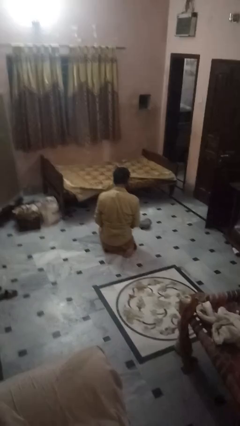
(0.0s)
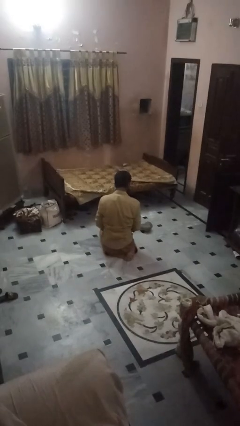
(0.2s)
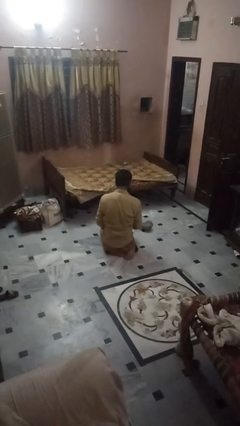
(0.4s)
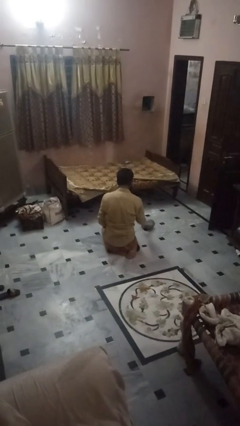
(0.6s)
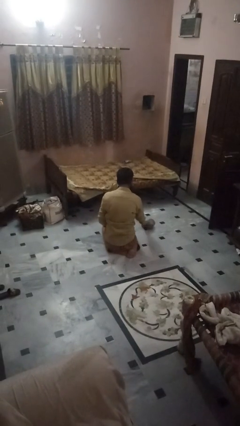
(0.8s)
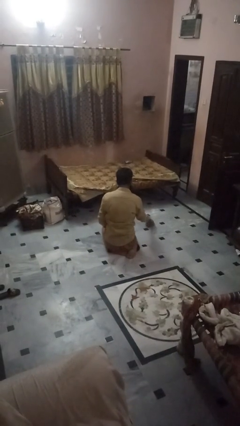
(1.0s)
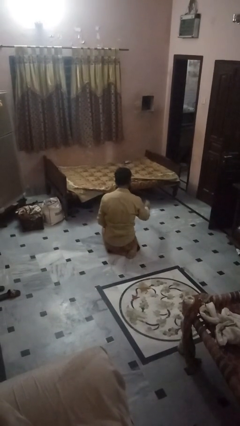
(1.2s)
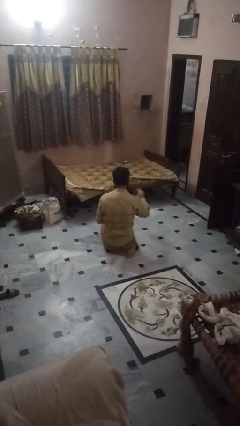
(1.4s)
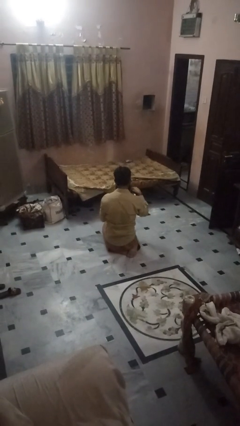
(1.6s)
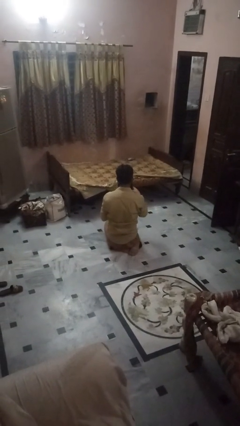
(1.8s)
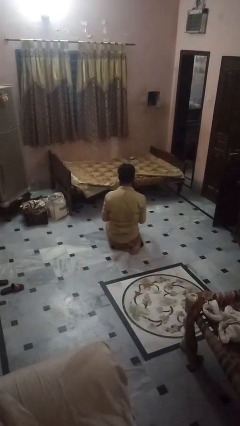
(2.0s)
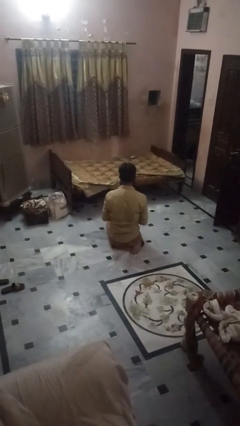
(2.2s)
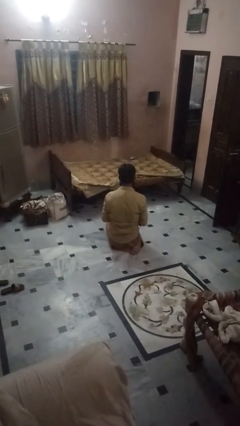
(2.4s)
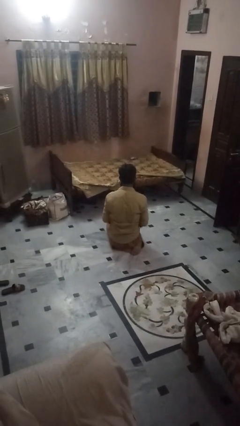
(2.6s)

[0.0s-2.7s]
person picks up object from floor

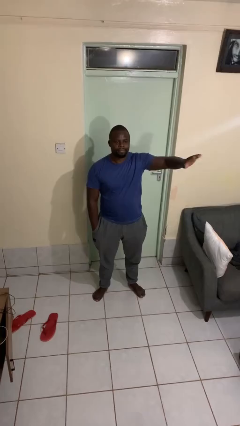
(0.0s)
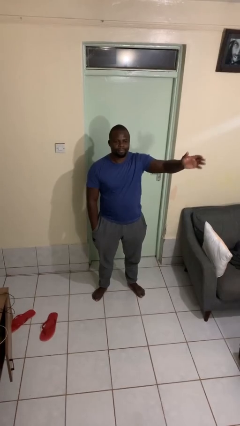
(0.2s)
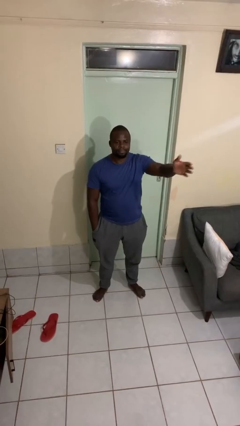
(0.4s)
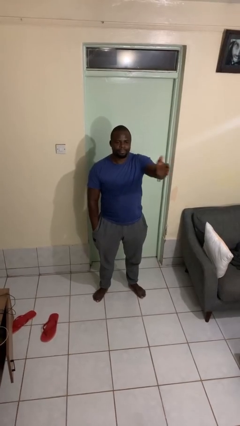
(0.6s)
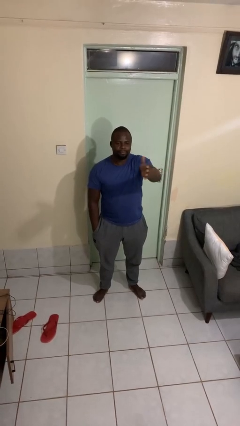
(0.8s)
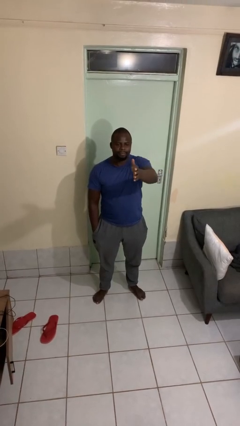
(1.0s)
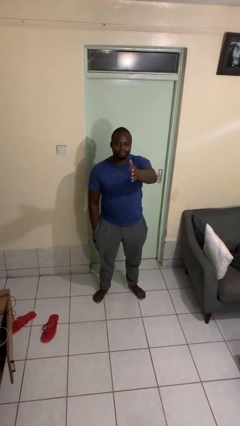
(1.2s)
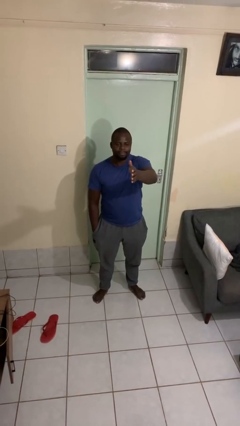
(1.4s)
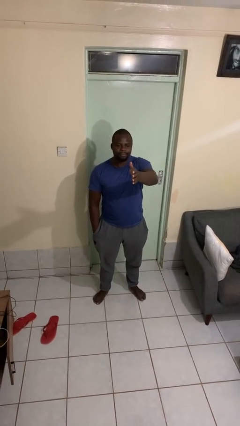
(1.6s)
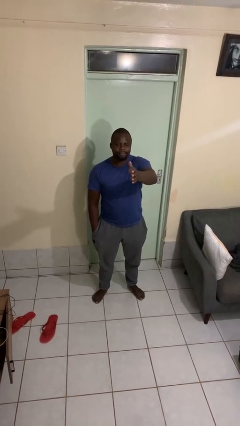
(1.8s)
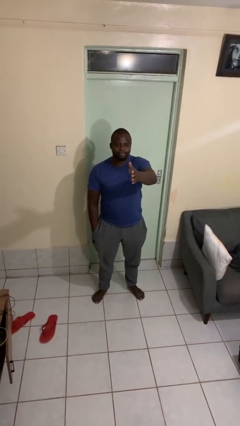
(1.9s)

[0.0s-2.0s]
person gestures swipe right

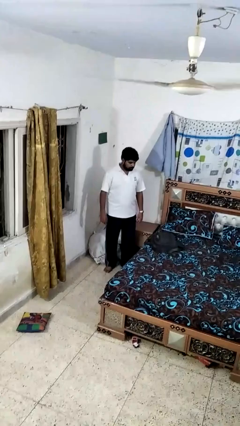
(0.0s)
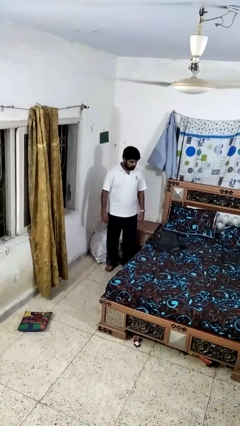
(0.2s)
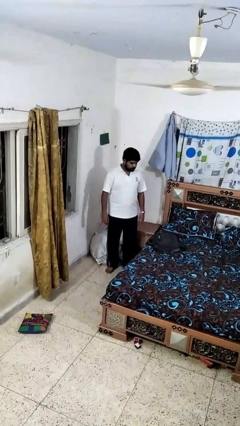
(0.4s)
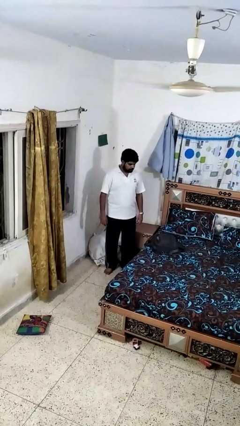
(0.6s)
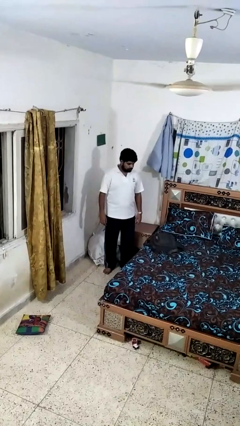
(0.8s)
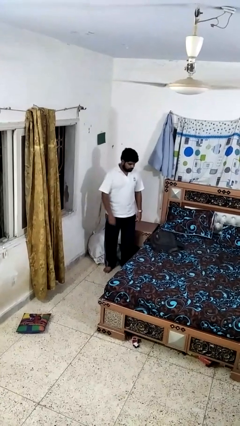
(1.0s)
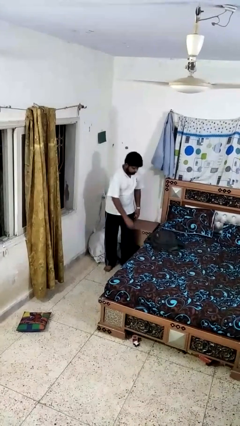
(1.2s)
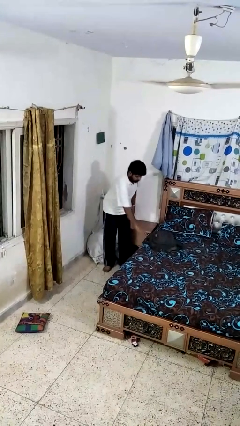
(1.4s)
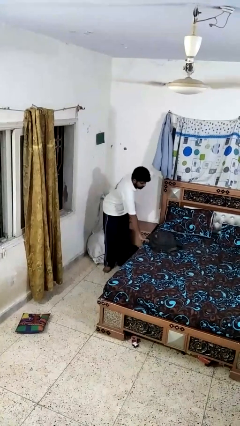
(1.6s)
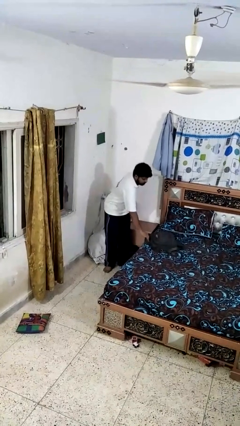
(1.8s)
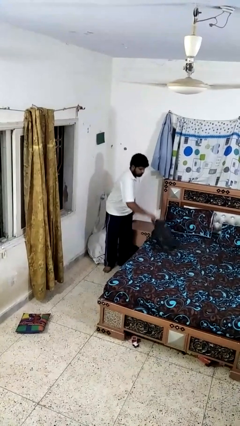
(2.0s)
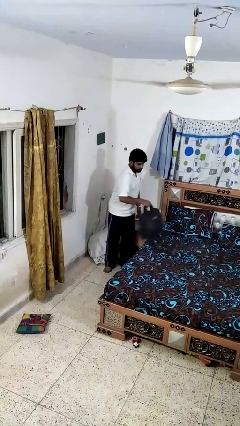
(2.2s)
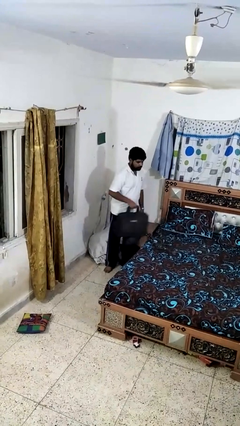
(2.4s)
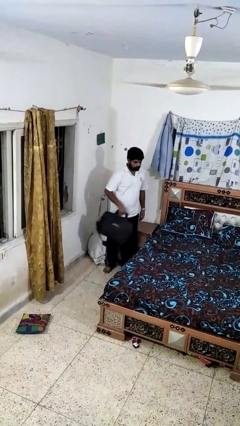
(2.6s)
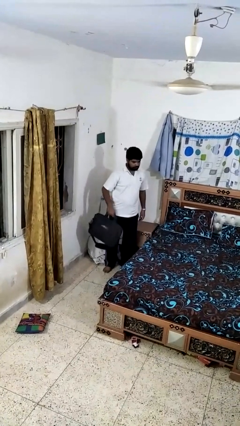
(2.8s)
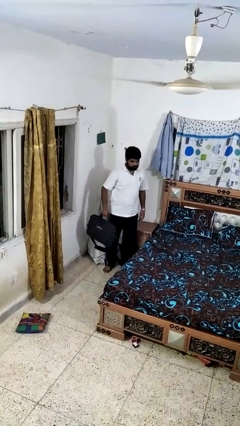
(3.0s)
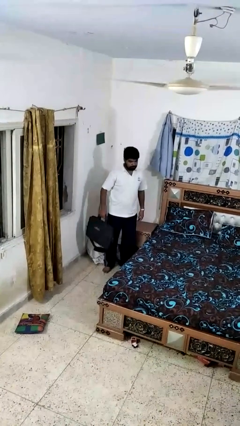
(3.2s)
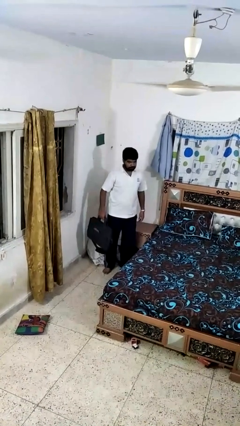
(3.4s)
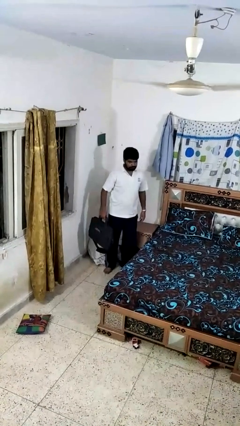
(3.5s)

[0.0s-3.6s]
person picks up object from bed

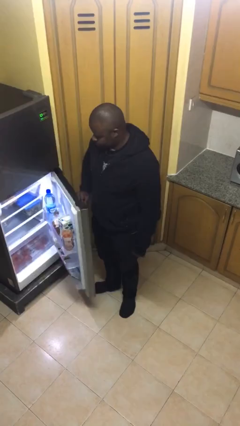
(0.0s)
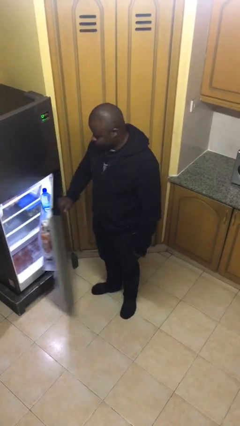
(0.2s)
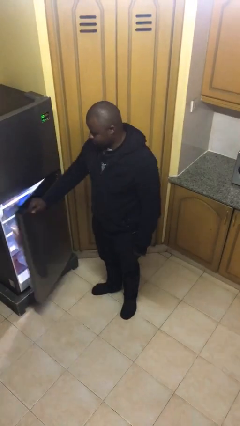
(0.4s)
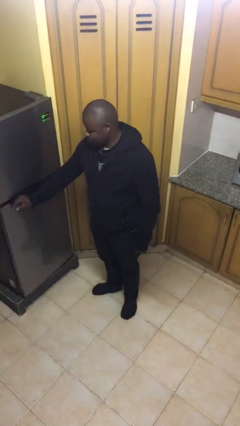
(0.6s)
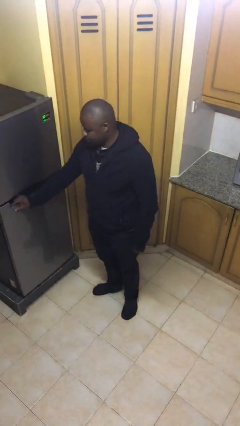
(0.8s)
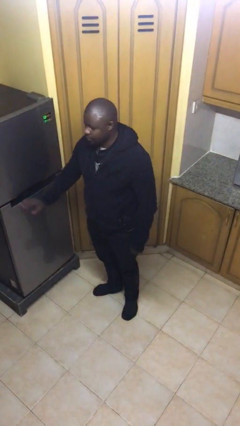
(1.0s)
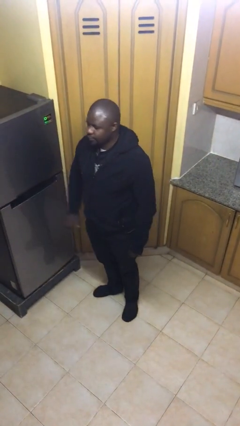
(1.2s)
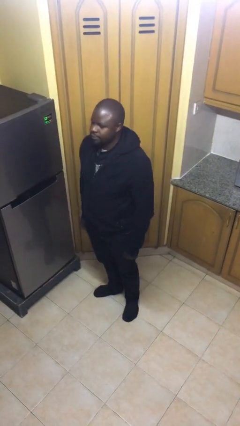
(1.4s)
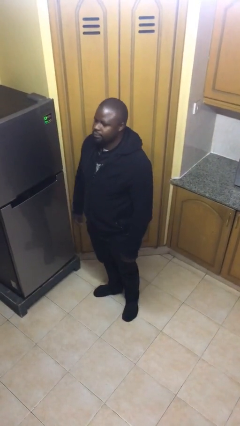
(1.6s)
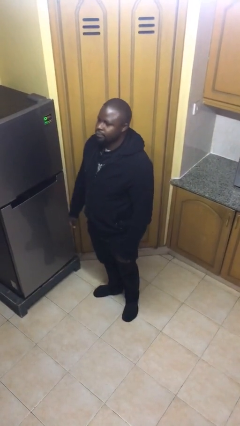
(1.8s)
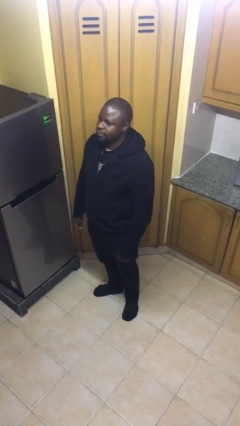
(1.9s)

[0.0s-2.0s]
person closes refrigerator

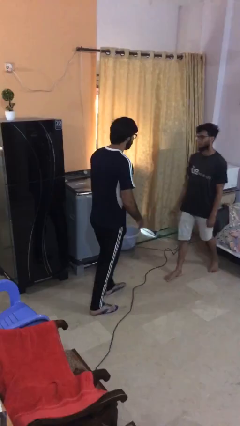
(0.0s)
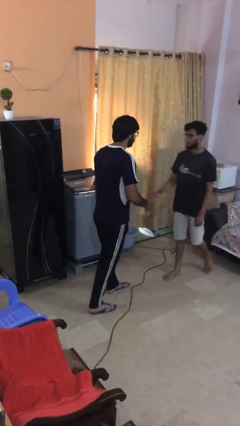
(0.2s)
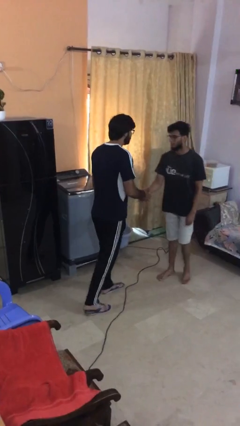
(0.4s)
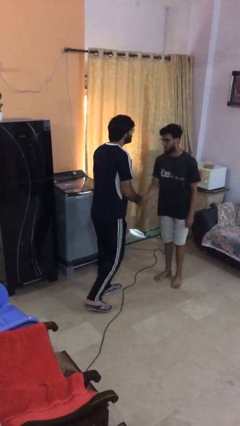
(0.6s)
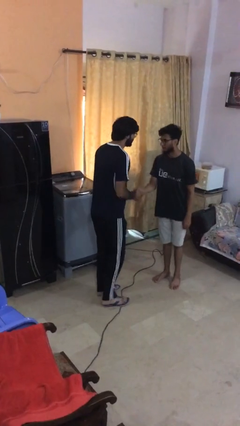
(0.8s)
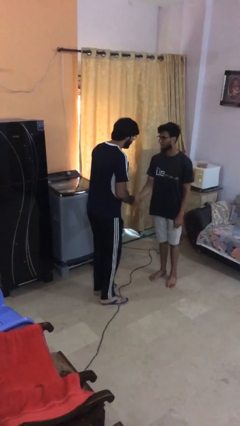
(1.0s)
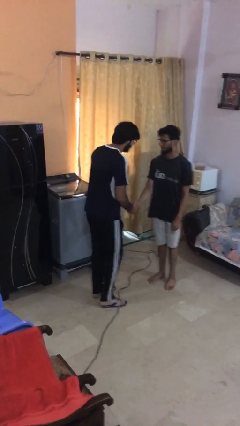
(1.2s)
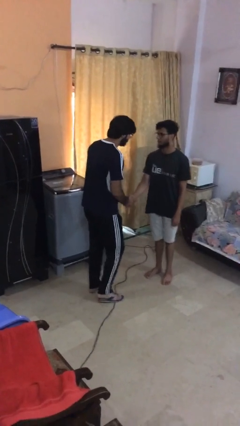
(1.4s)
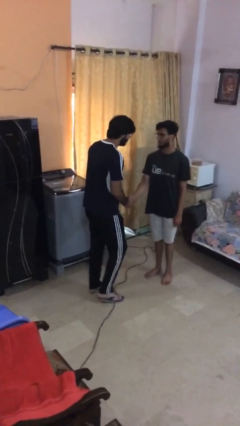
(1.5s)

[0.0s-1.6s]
person shakes hand

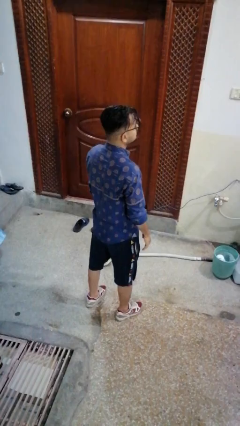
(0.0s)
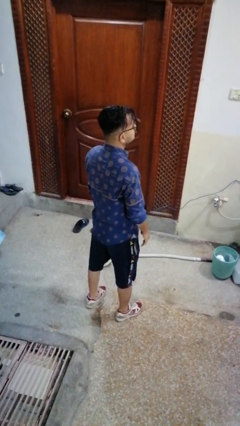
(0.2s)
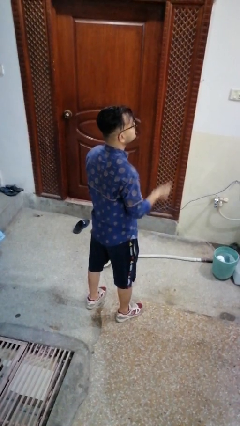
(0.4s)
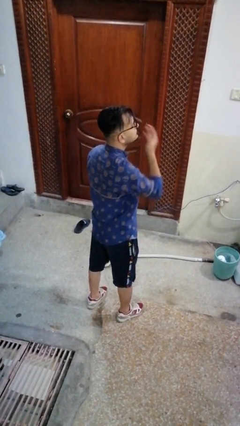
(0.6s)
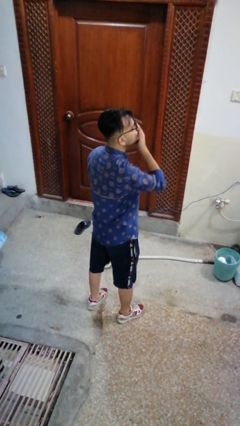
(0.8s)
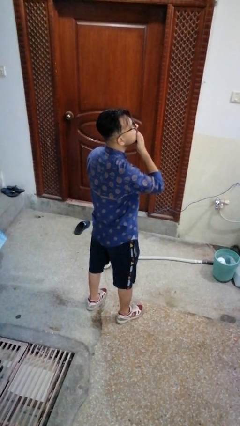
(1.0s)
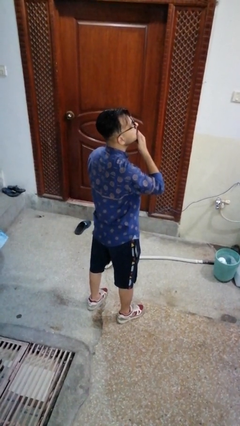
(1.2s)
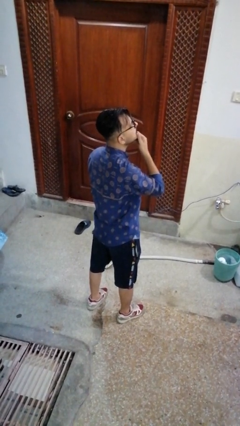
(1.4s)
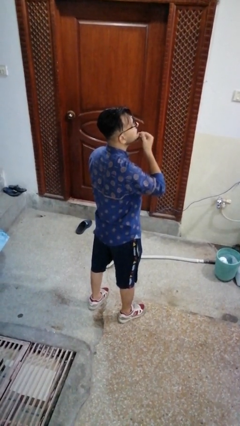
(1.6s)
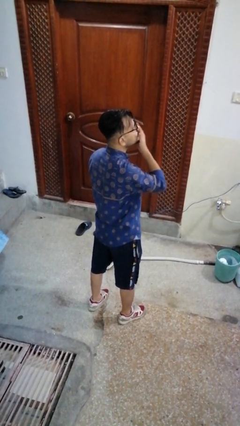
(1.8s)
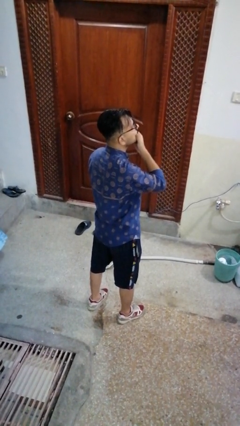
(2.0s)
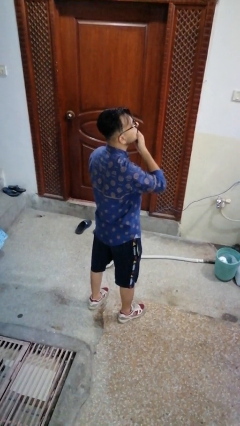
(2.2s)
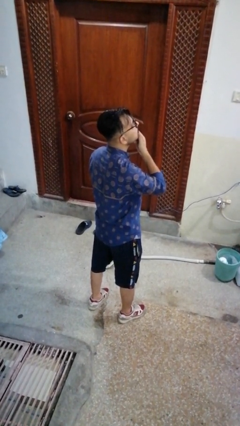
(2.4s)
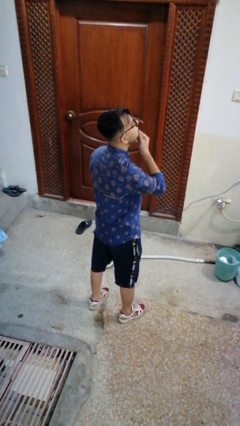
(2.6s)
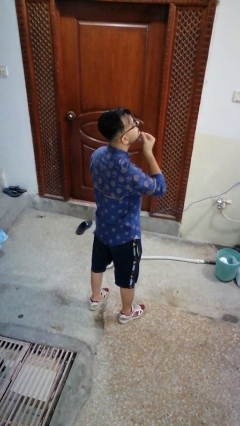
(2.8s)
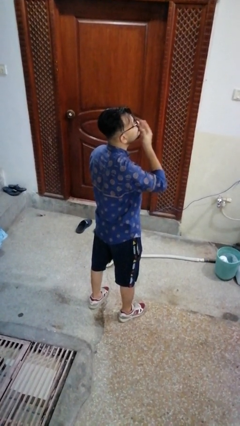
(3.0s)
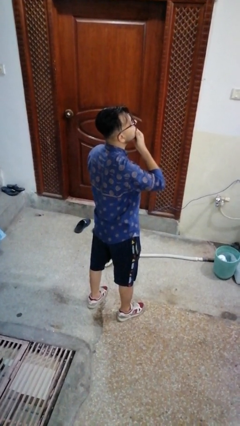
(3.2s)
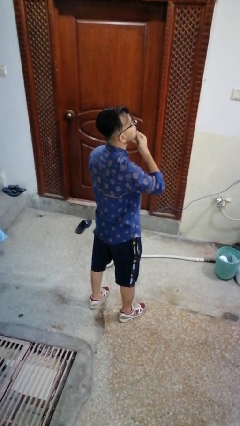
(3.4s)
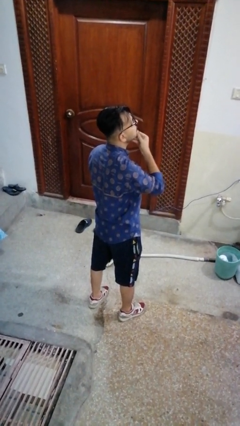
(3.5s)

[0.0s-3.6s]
person strokes chin

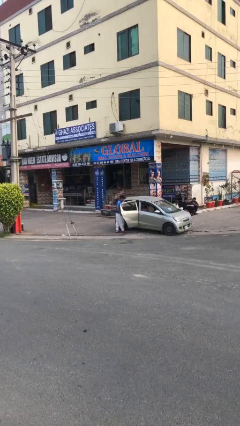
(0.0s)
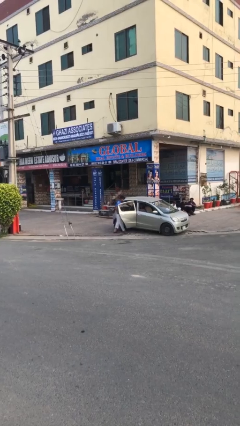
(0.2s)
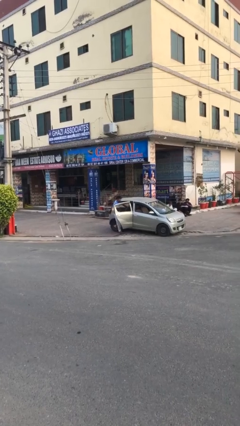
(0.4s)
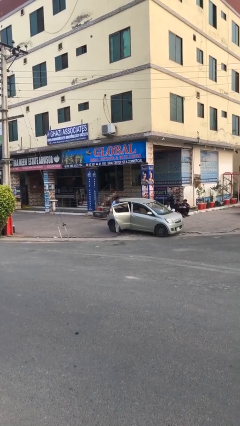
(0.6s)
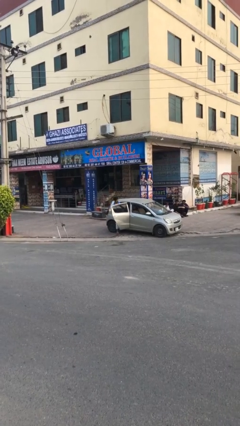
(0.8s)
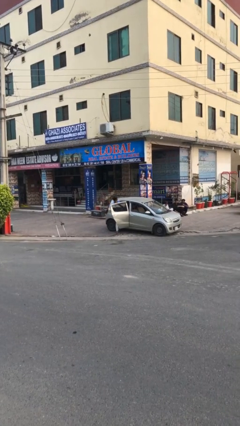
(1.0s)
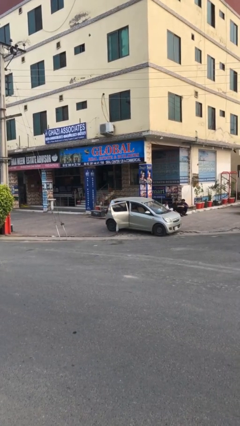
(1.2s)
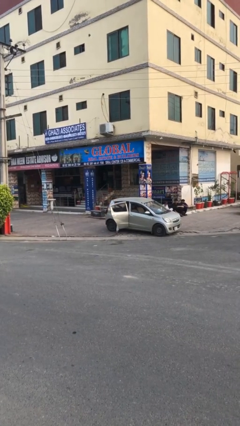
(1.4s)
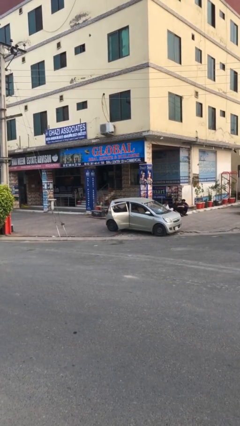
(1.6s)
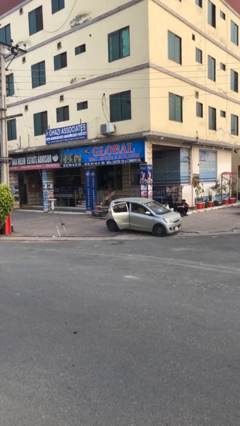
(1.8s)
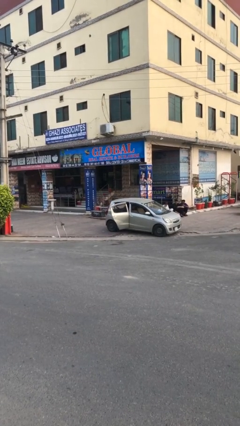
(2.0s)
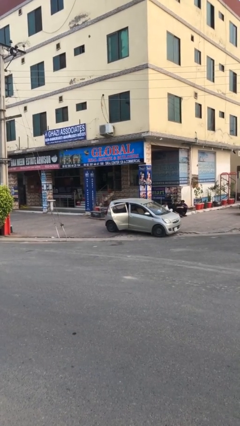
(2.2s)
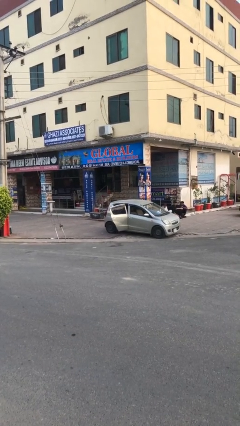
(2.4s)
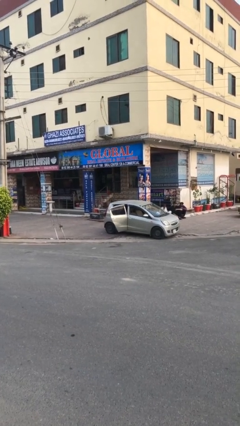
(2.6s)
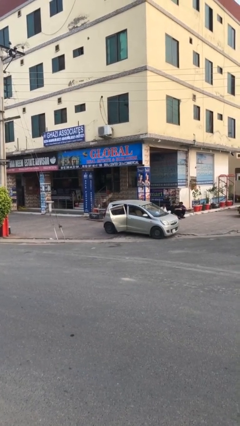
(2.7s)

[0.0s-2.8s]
person enters car
